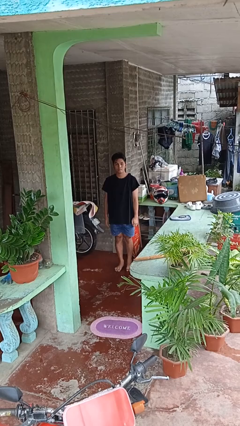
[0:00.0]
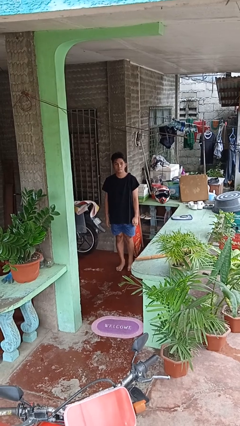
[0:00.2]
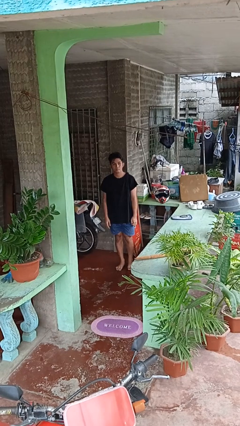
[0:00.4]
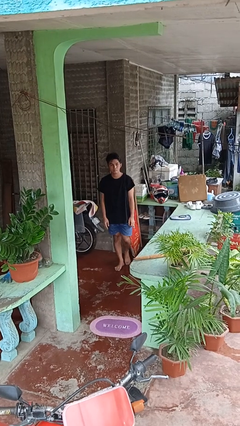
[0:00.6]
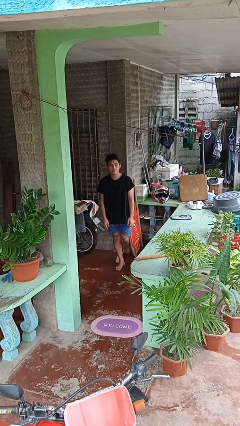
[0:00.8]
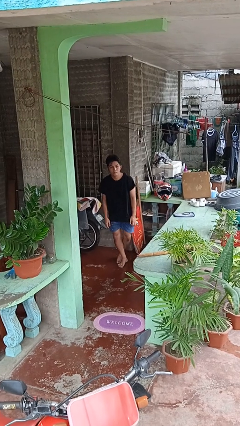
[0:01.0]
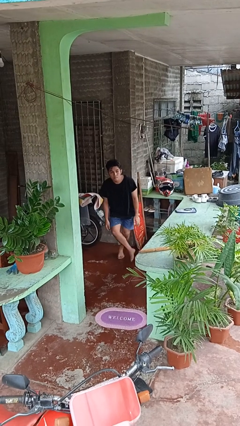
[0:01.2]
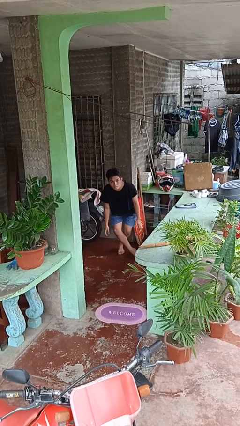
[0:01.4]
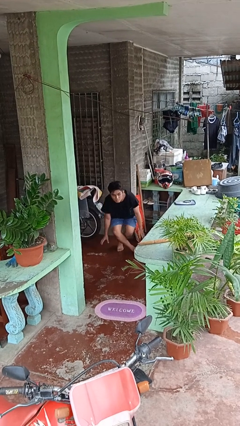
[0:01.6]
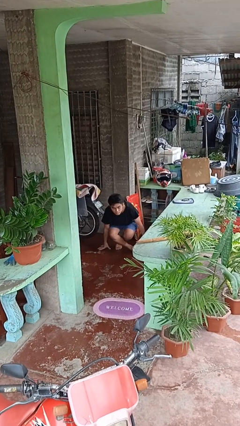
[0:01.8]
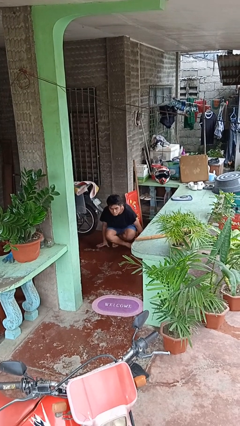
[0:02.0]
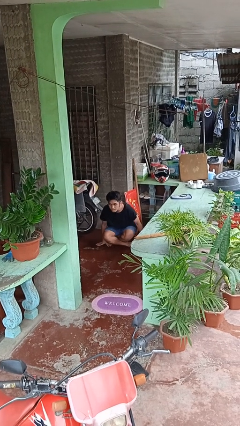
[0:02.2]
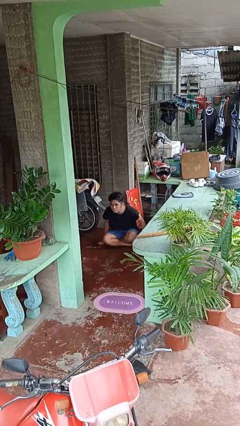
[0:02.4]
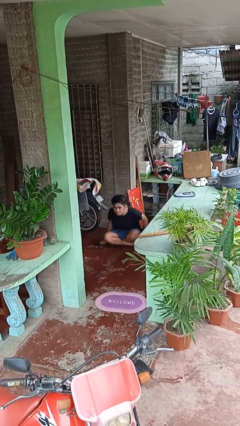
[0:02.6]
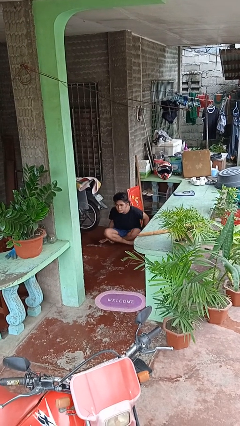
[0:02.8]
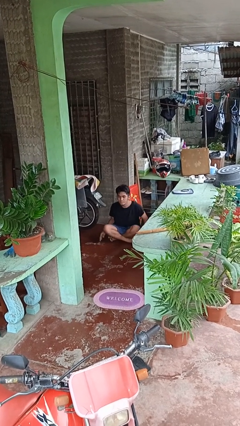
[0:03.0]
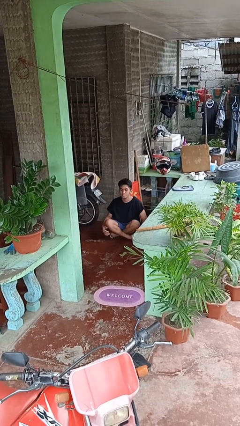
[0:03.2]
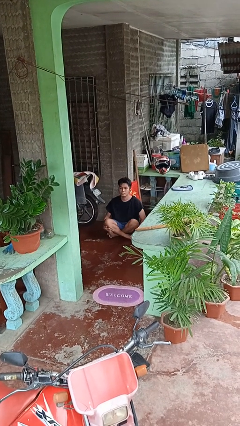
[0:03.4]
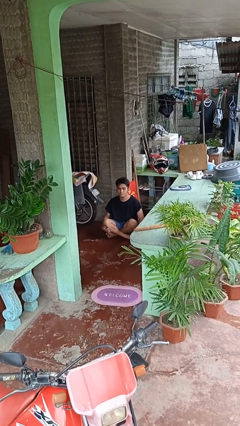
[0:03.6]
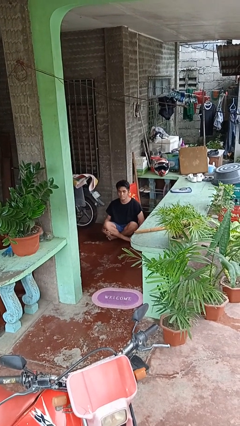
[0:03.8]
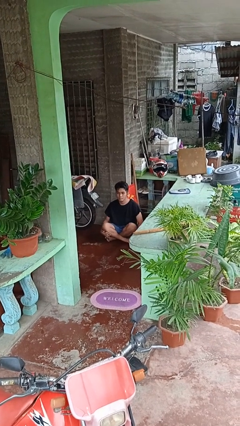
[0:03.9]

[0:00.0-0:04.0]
person sits crisscross

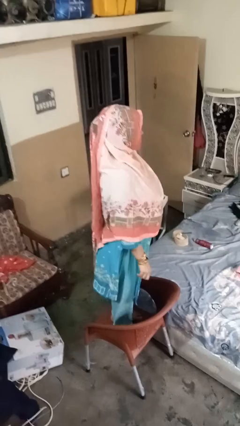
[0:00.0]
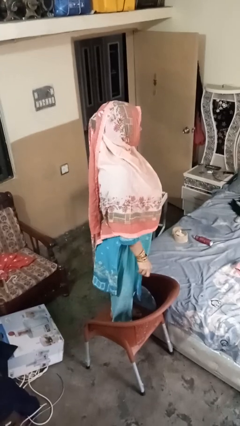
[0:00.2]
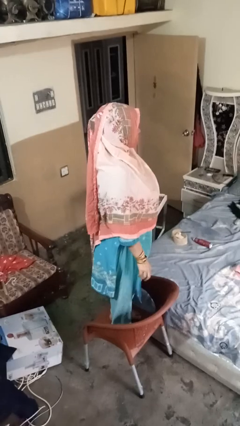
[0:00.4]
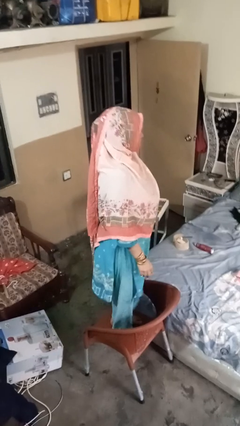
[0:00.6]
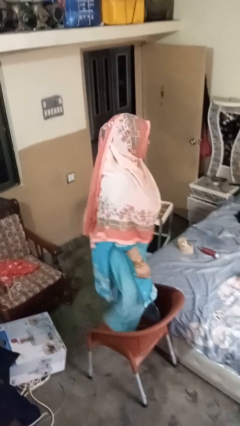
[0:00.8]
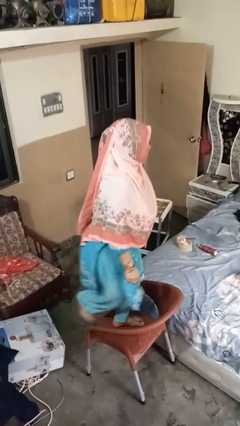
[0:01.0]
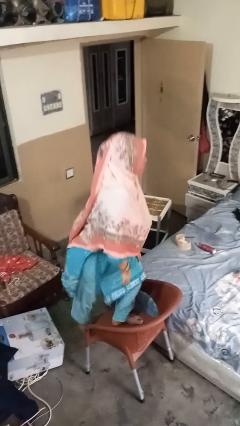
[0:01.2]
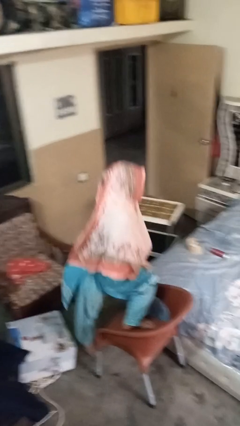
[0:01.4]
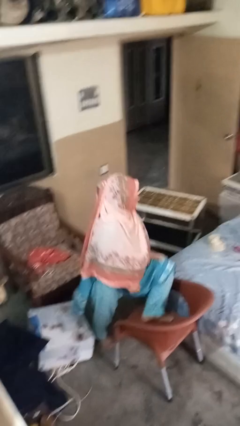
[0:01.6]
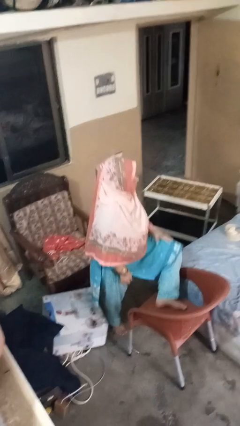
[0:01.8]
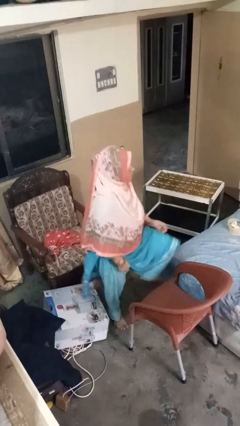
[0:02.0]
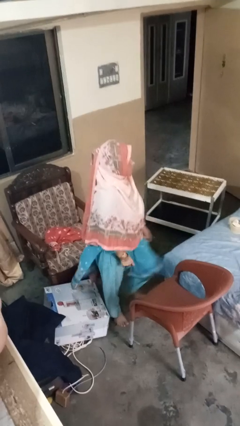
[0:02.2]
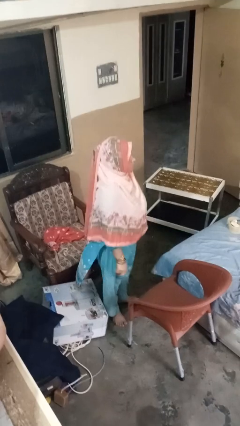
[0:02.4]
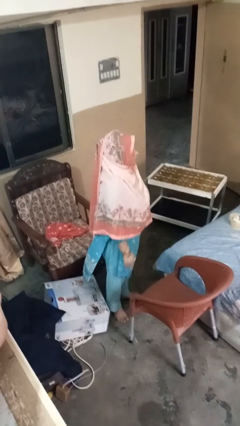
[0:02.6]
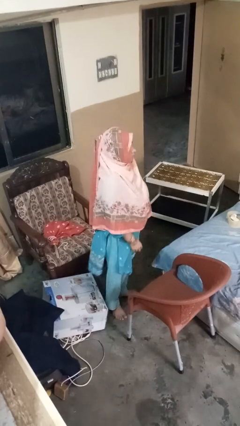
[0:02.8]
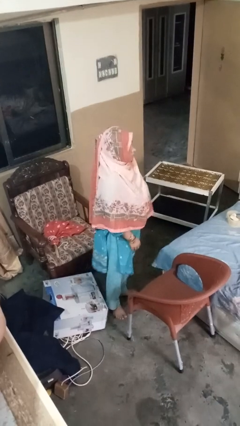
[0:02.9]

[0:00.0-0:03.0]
person climbs off chair

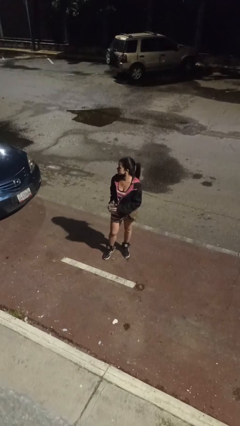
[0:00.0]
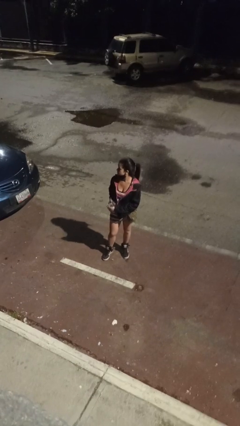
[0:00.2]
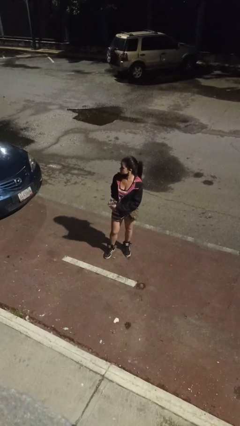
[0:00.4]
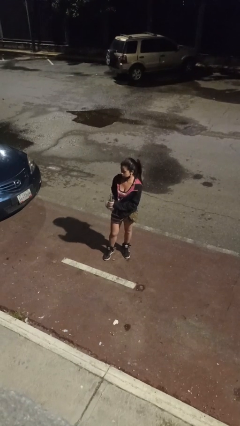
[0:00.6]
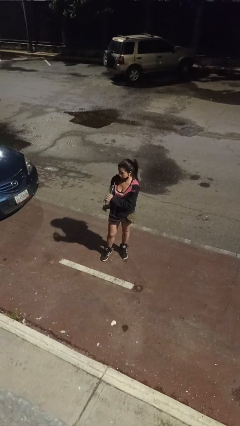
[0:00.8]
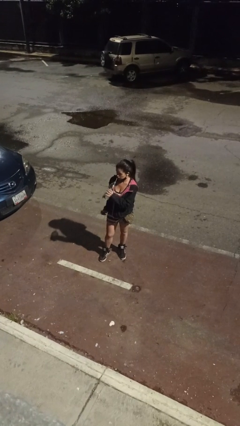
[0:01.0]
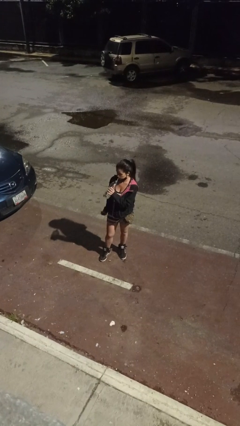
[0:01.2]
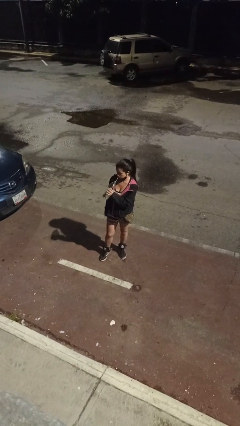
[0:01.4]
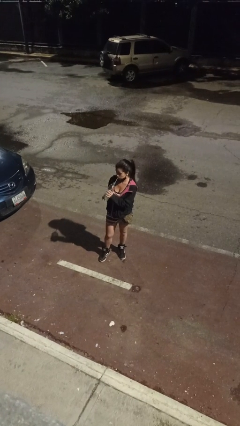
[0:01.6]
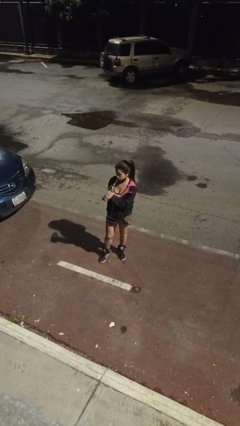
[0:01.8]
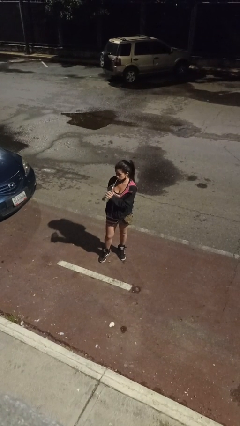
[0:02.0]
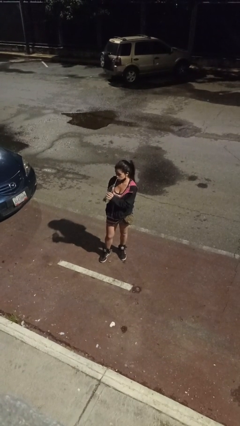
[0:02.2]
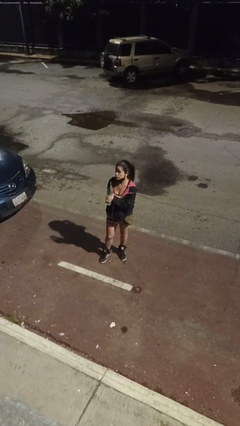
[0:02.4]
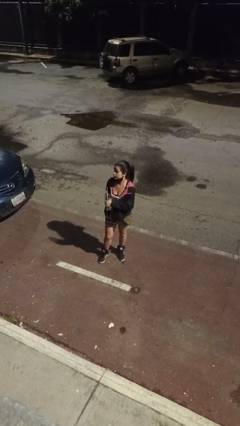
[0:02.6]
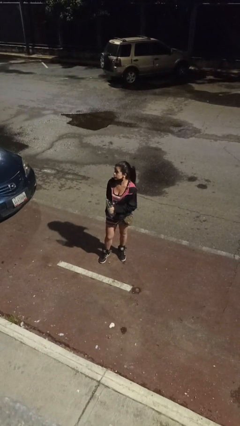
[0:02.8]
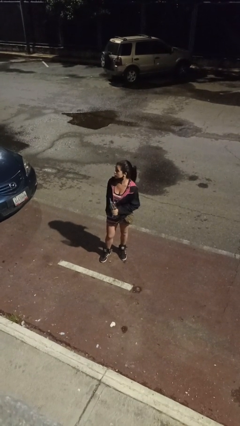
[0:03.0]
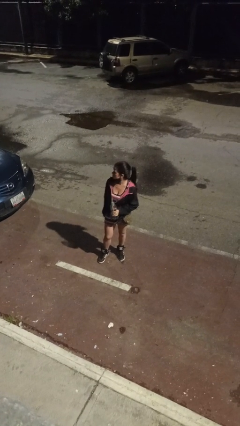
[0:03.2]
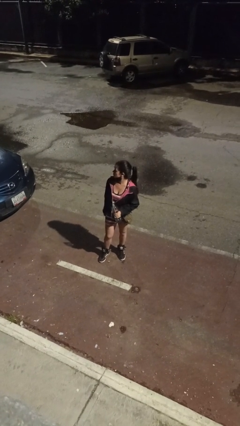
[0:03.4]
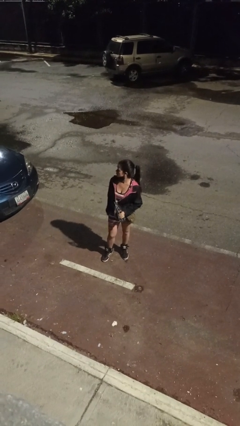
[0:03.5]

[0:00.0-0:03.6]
person drinks from straw

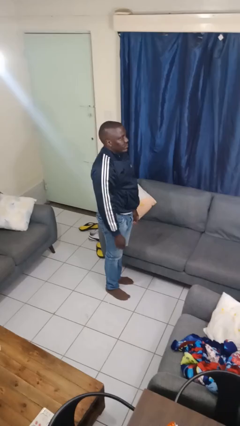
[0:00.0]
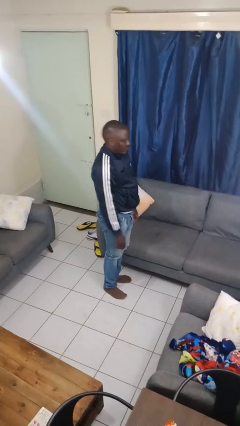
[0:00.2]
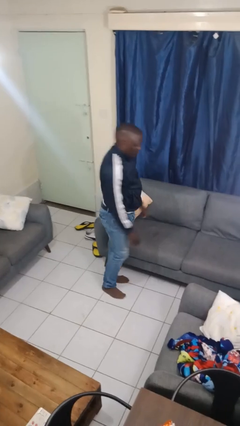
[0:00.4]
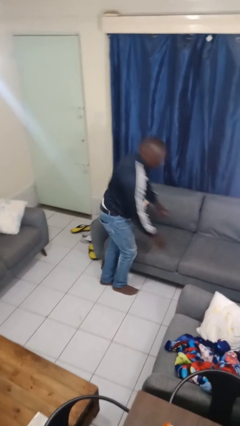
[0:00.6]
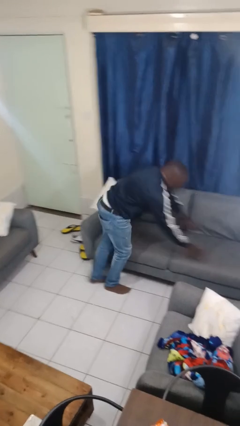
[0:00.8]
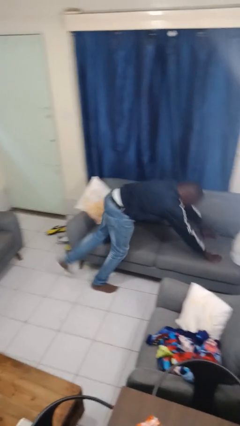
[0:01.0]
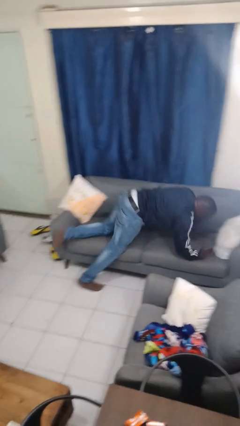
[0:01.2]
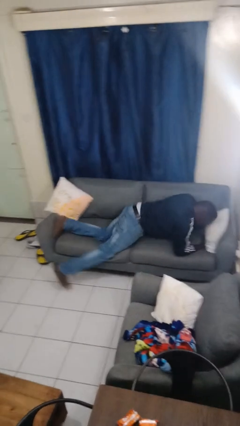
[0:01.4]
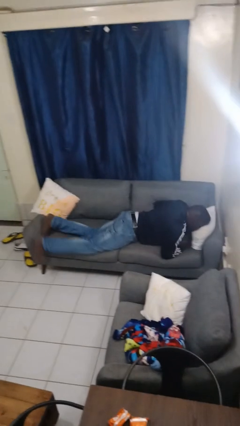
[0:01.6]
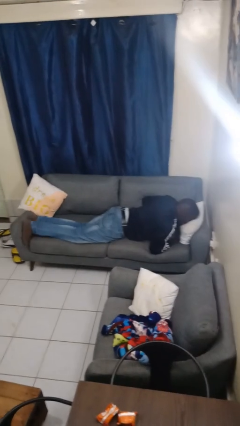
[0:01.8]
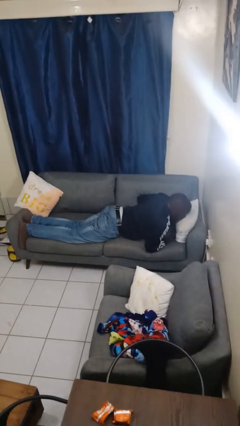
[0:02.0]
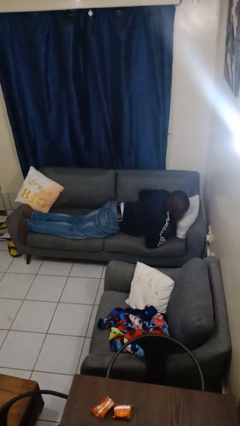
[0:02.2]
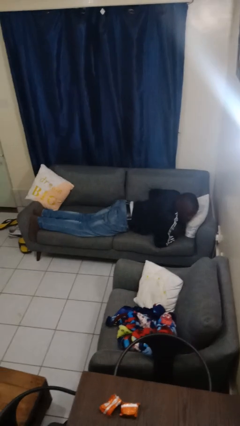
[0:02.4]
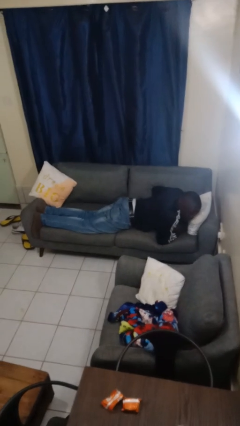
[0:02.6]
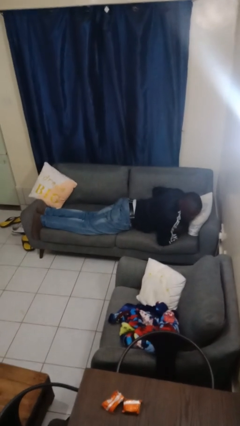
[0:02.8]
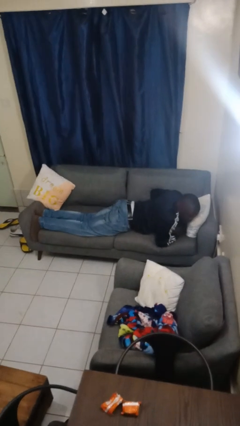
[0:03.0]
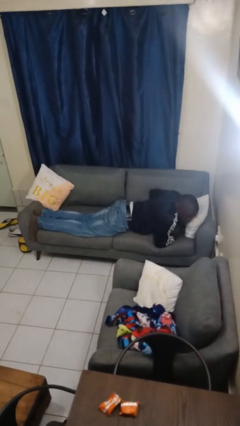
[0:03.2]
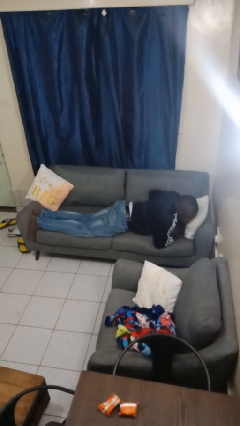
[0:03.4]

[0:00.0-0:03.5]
person lies down on couch

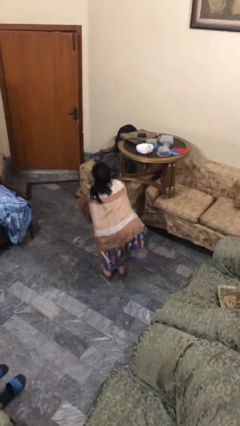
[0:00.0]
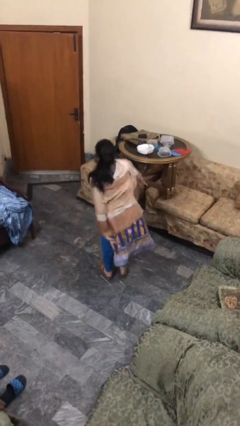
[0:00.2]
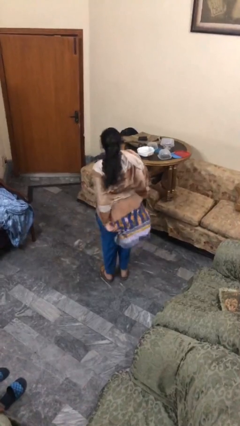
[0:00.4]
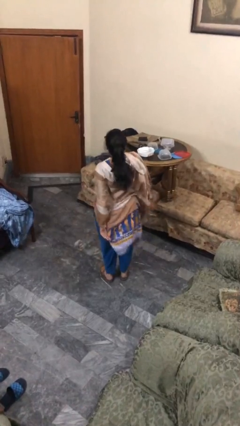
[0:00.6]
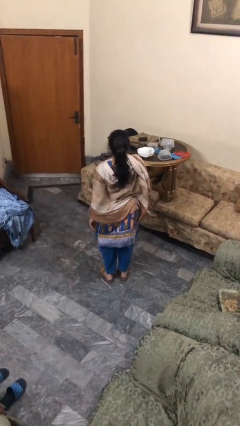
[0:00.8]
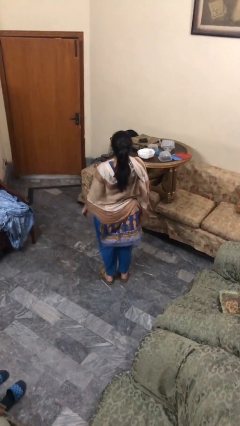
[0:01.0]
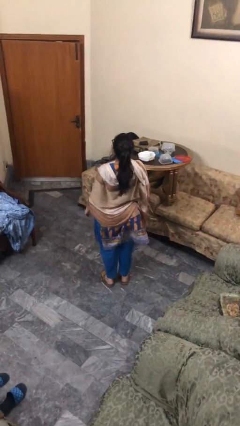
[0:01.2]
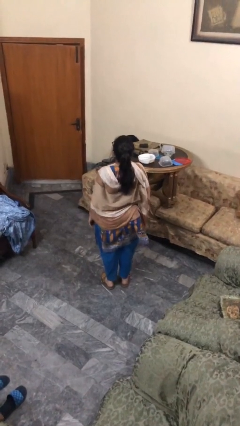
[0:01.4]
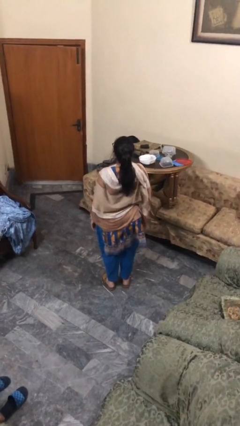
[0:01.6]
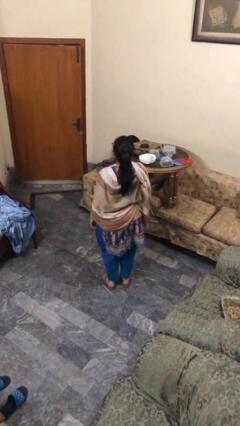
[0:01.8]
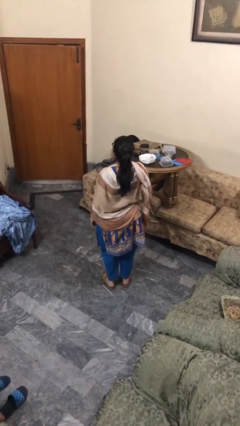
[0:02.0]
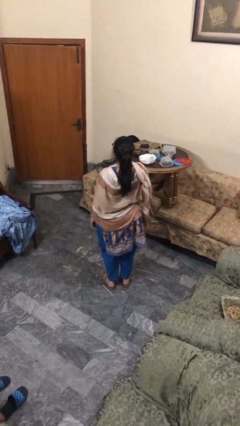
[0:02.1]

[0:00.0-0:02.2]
person picks up object from floor

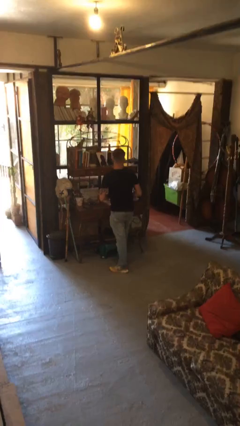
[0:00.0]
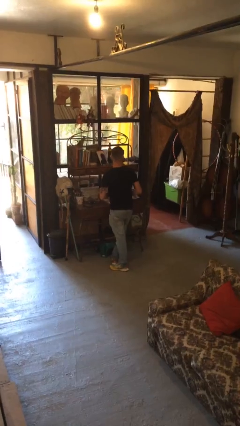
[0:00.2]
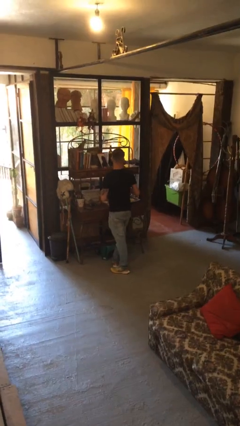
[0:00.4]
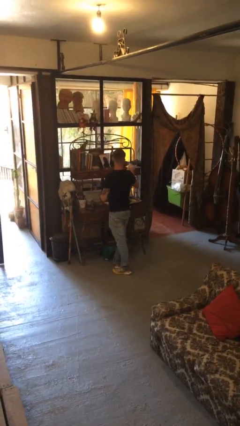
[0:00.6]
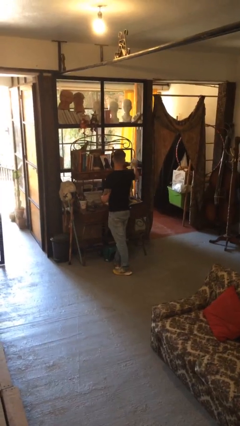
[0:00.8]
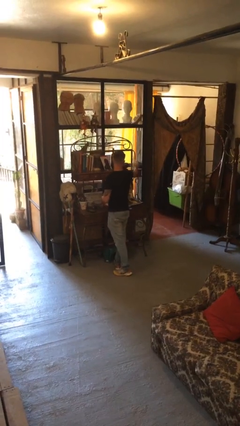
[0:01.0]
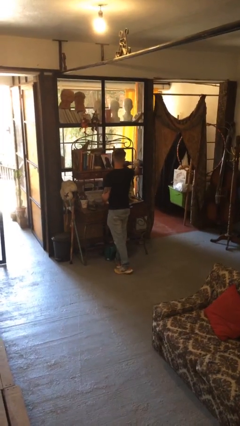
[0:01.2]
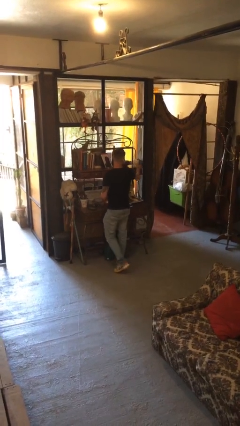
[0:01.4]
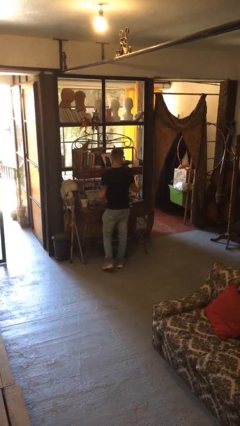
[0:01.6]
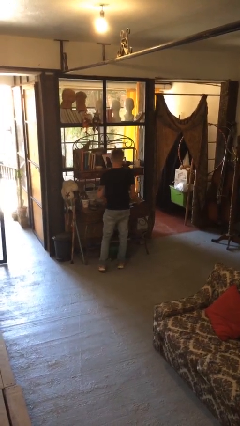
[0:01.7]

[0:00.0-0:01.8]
person puts down object on countertop
